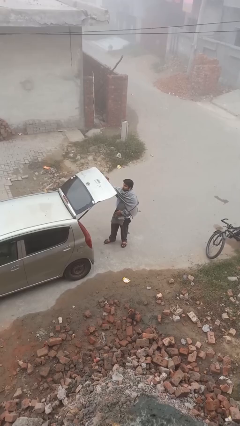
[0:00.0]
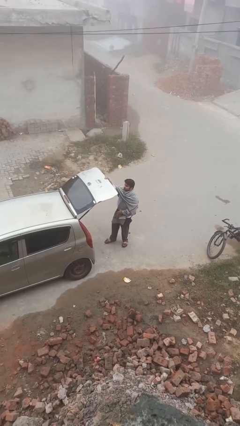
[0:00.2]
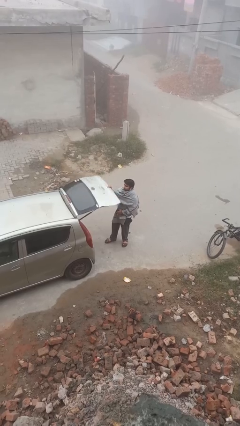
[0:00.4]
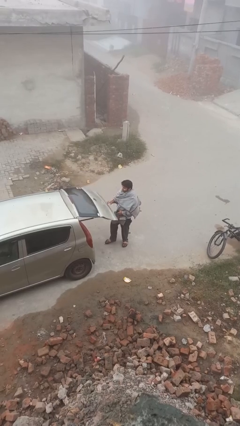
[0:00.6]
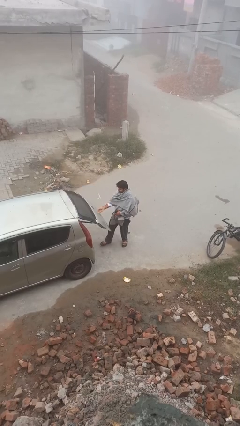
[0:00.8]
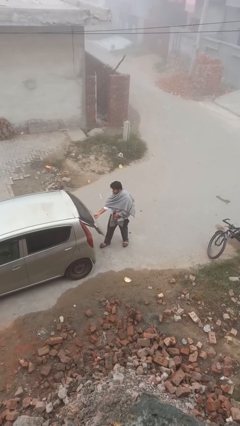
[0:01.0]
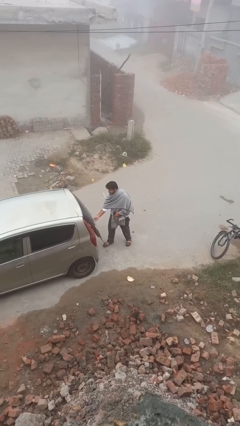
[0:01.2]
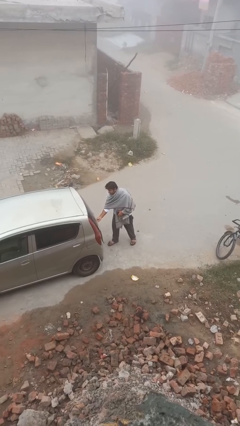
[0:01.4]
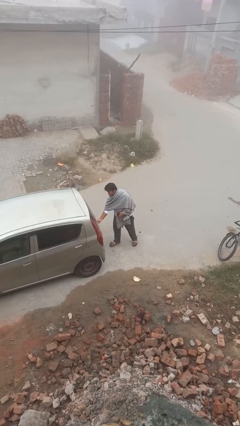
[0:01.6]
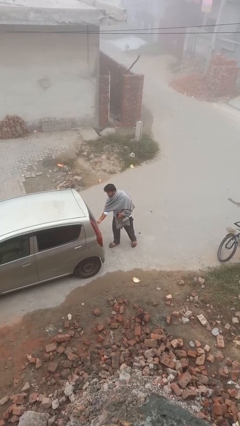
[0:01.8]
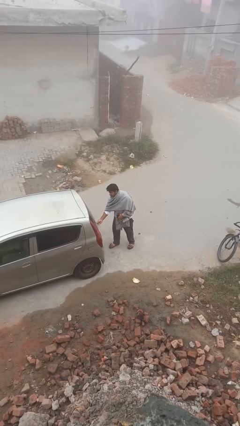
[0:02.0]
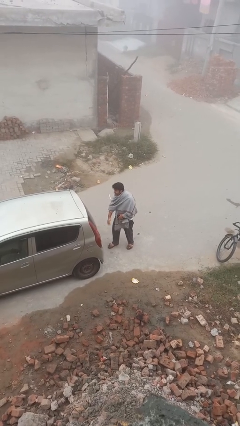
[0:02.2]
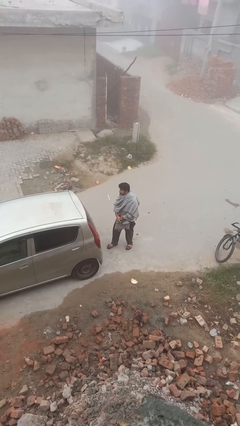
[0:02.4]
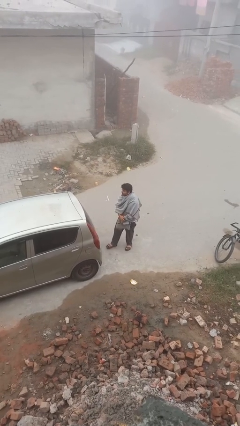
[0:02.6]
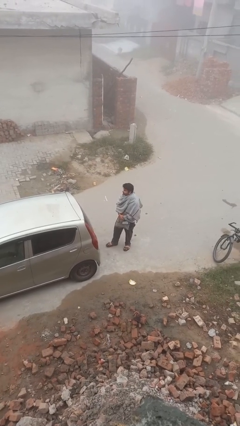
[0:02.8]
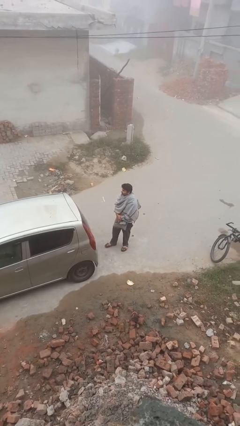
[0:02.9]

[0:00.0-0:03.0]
person closes car trunk

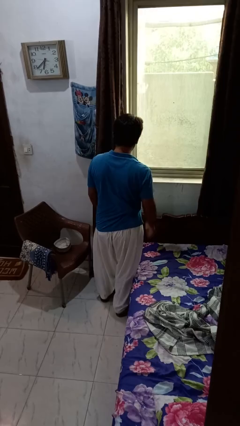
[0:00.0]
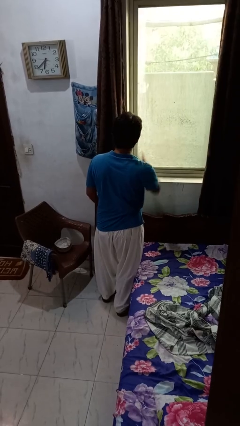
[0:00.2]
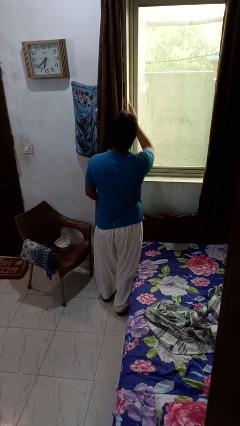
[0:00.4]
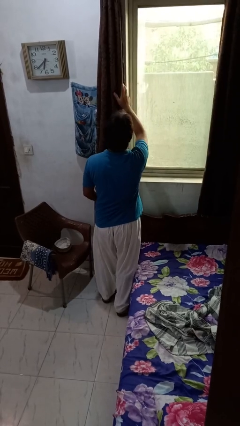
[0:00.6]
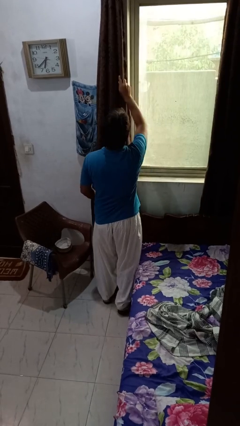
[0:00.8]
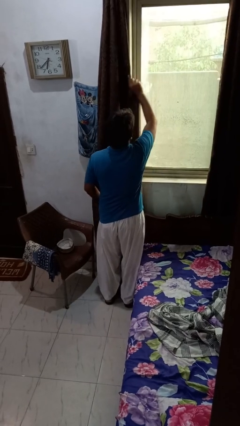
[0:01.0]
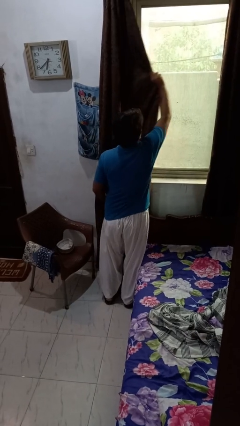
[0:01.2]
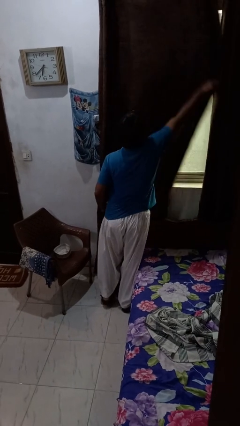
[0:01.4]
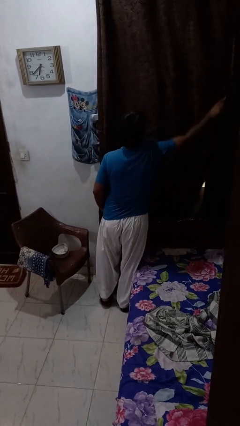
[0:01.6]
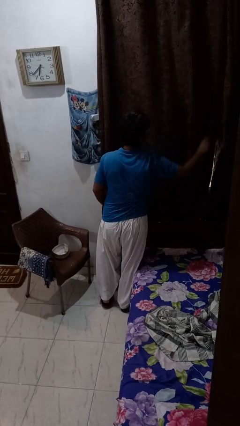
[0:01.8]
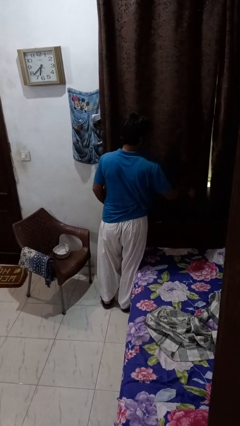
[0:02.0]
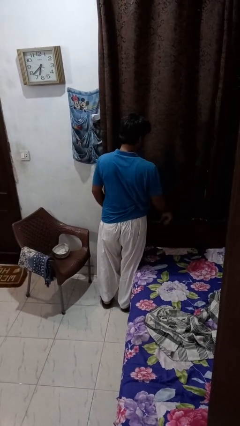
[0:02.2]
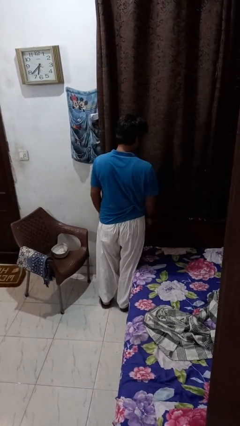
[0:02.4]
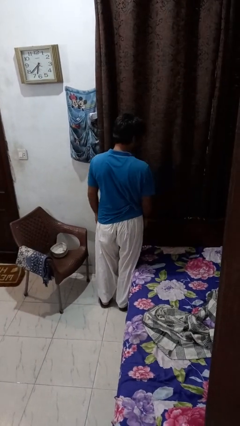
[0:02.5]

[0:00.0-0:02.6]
person closes curtains

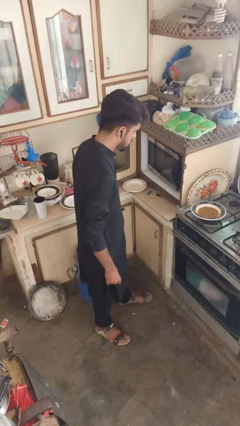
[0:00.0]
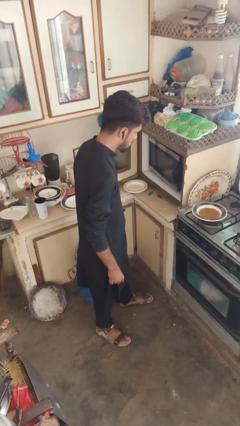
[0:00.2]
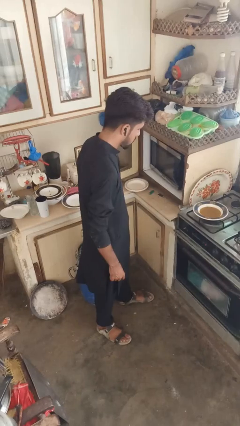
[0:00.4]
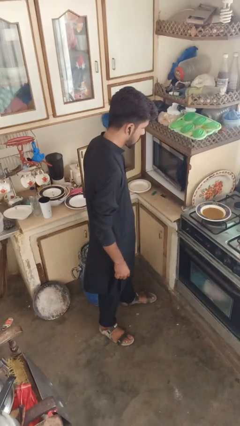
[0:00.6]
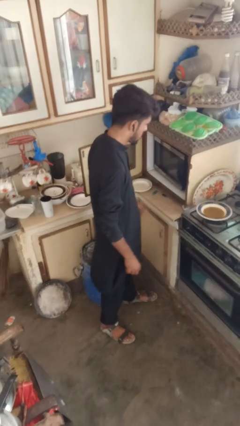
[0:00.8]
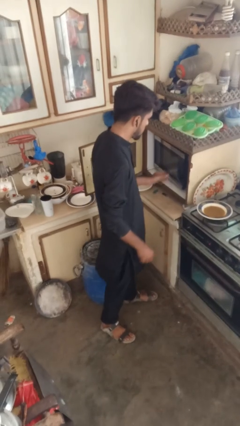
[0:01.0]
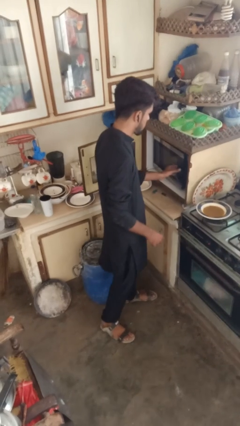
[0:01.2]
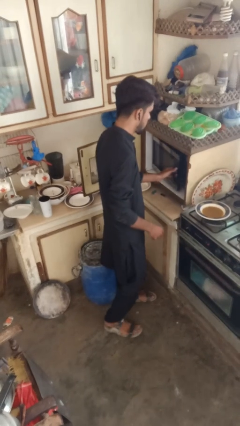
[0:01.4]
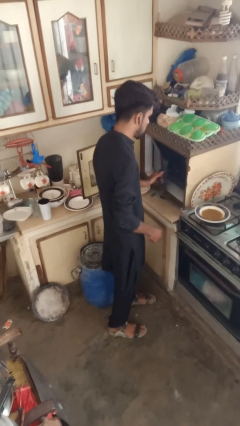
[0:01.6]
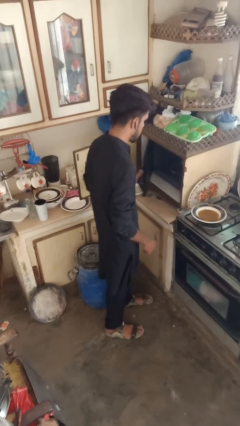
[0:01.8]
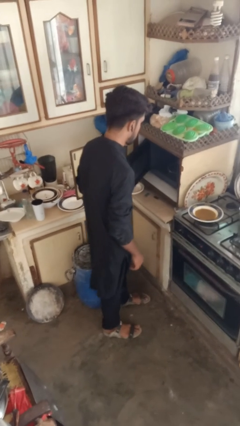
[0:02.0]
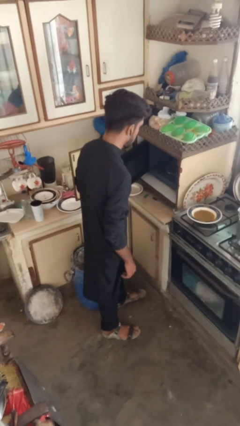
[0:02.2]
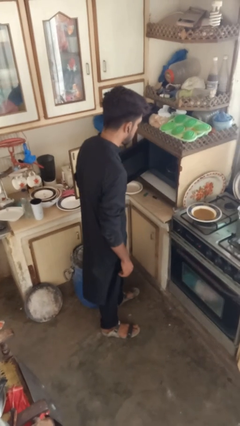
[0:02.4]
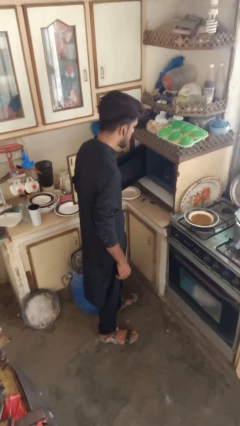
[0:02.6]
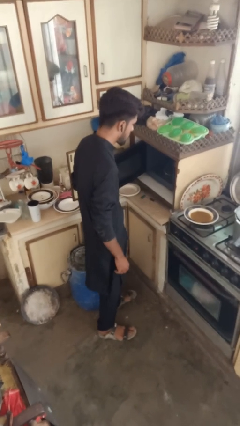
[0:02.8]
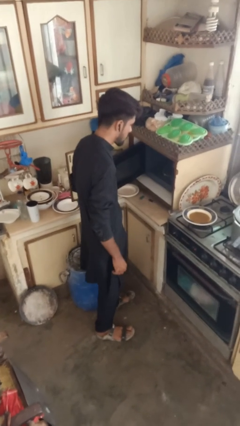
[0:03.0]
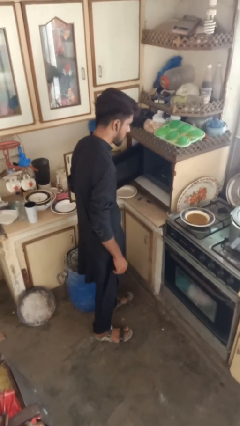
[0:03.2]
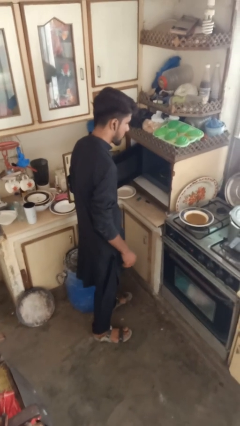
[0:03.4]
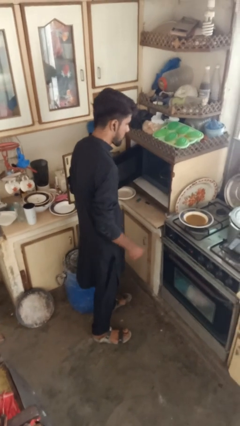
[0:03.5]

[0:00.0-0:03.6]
person opens microwave

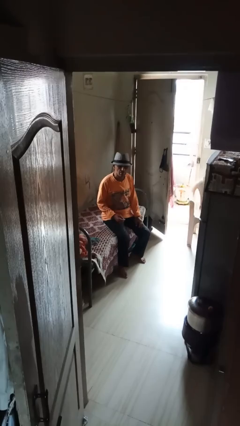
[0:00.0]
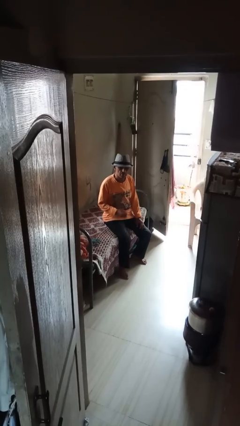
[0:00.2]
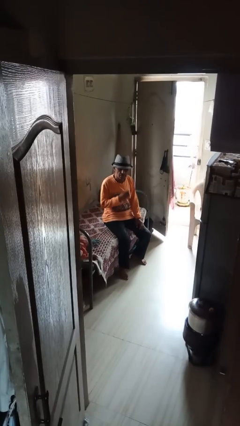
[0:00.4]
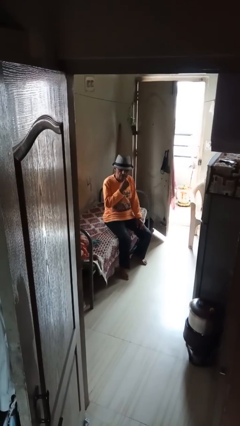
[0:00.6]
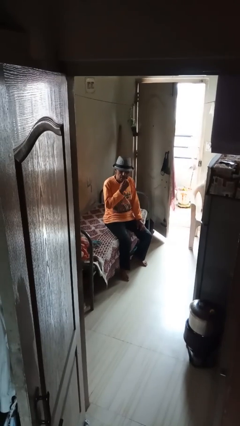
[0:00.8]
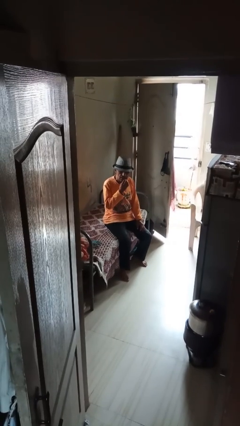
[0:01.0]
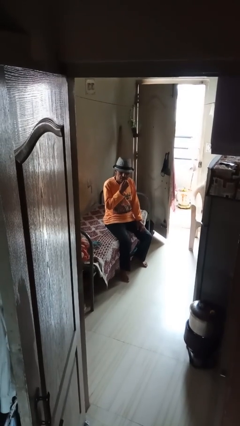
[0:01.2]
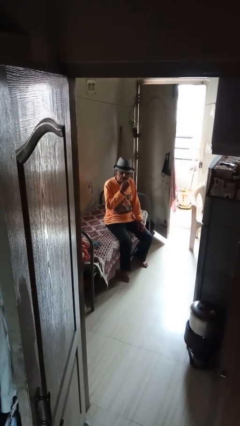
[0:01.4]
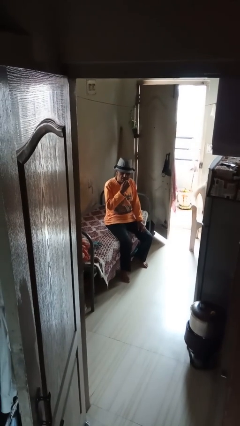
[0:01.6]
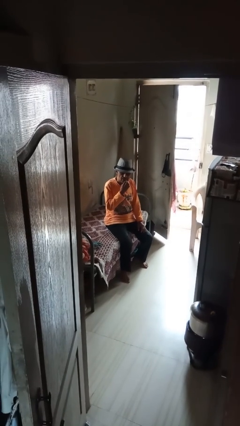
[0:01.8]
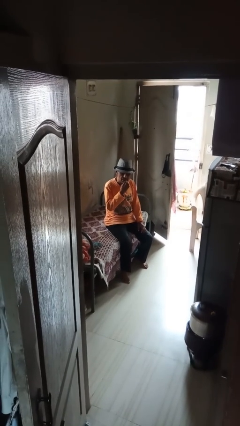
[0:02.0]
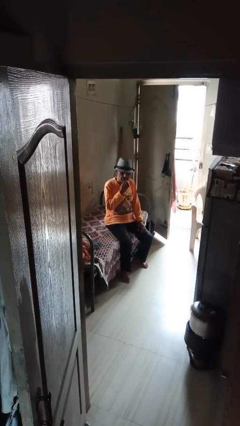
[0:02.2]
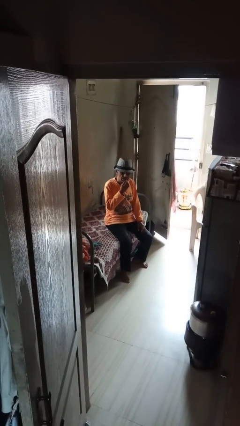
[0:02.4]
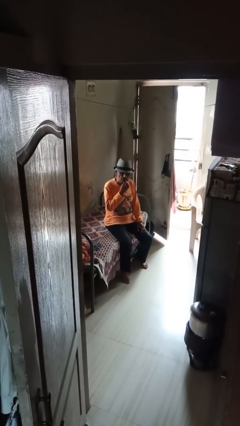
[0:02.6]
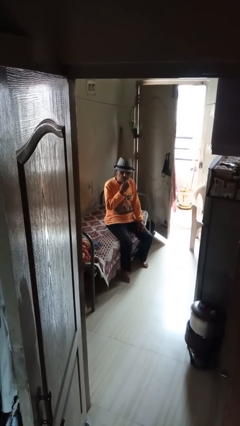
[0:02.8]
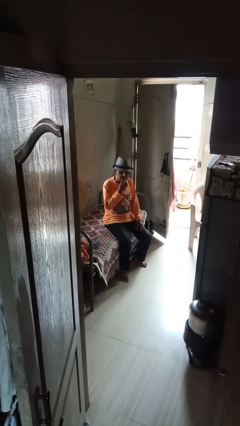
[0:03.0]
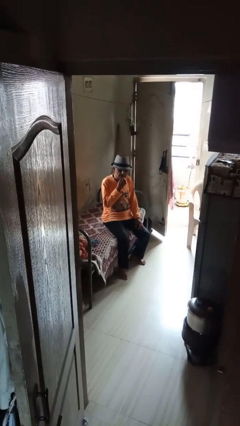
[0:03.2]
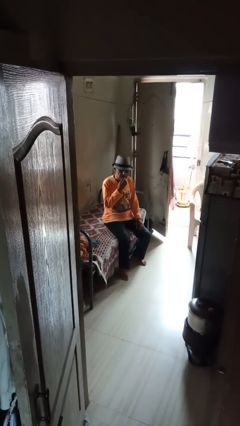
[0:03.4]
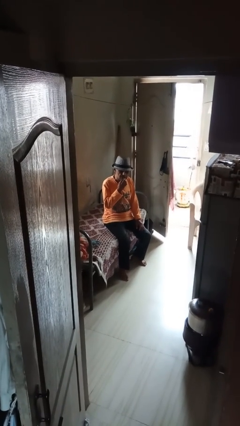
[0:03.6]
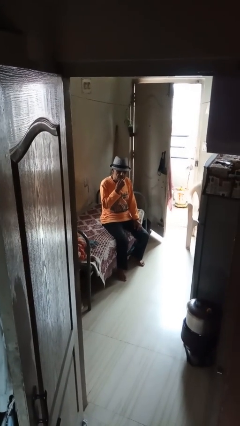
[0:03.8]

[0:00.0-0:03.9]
person flosses

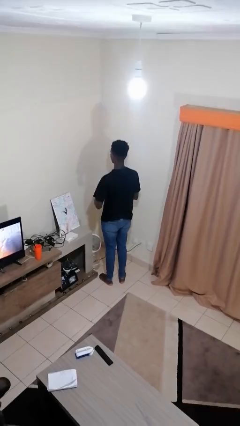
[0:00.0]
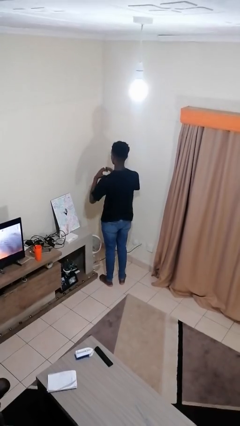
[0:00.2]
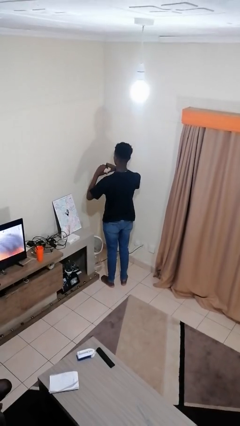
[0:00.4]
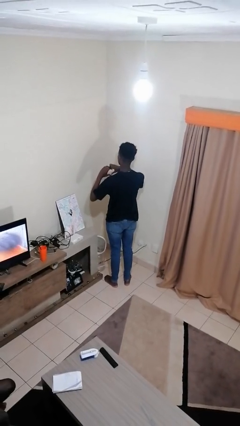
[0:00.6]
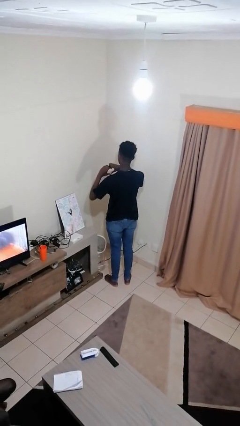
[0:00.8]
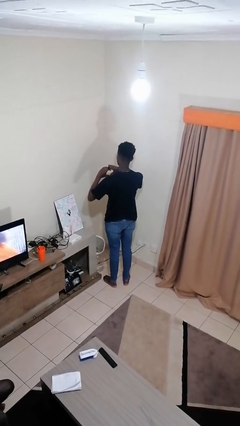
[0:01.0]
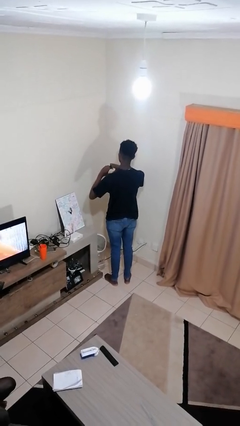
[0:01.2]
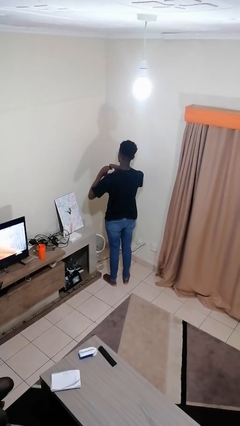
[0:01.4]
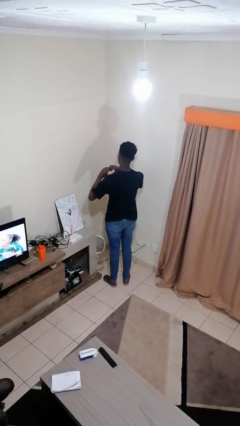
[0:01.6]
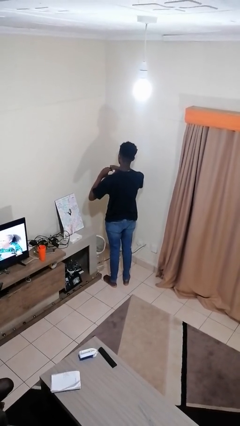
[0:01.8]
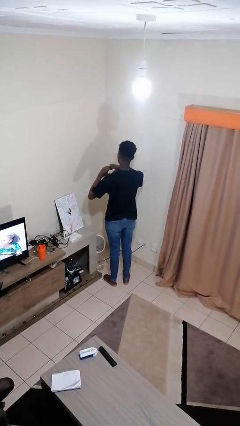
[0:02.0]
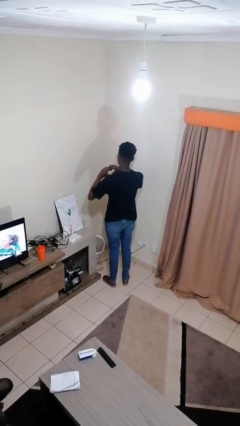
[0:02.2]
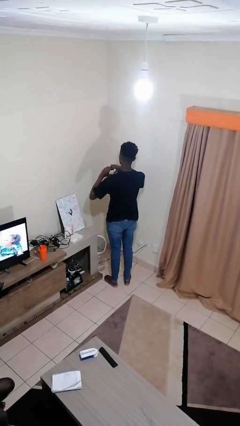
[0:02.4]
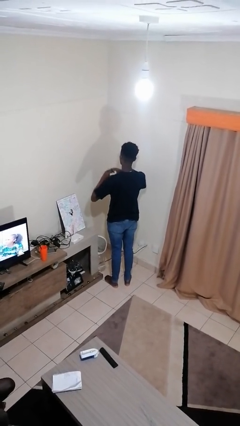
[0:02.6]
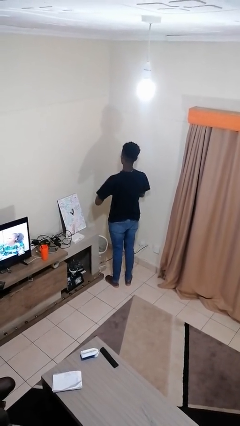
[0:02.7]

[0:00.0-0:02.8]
person gestures heart

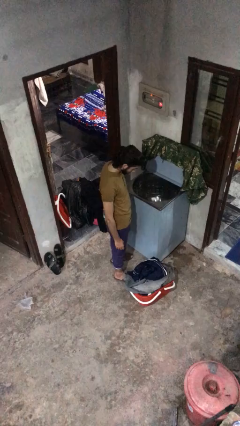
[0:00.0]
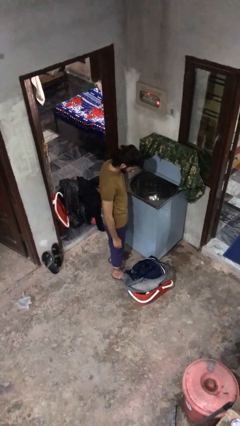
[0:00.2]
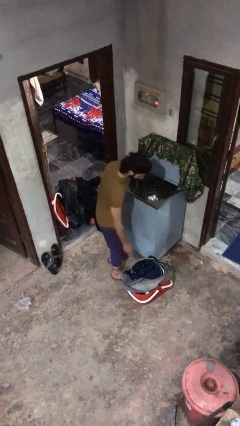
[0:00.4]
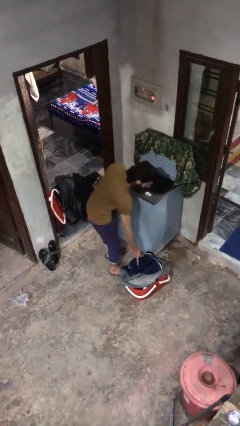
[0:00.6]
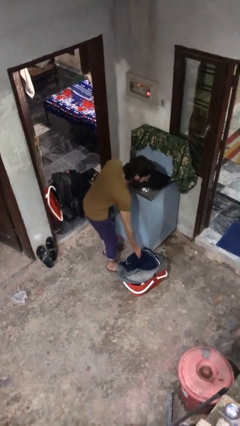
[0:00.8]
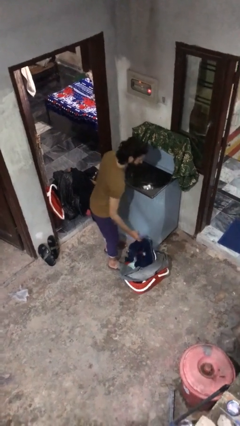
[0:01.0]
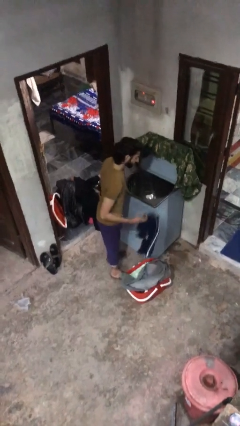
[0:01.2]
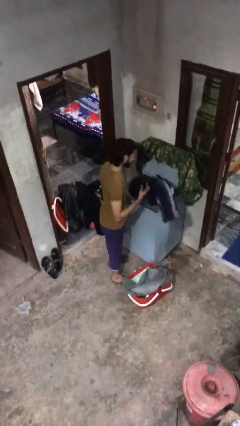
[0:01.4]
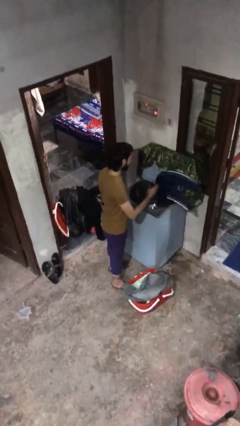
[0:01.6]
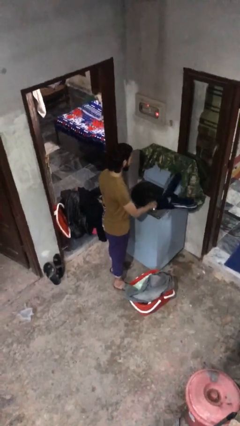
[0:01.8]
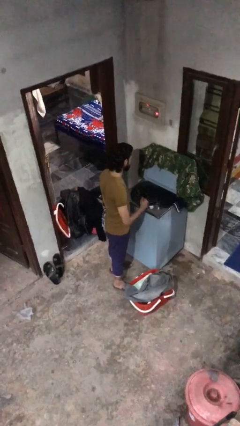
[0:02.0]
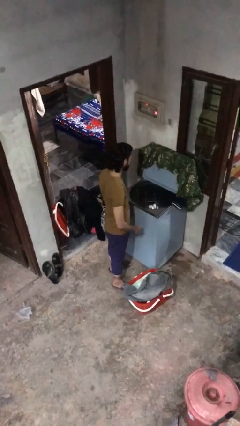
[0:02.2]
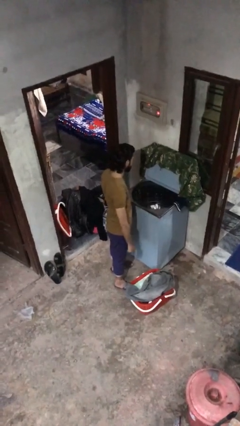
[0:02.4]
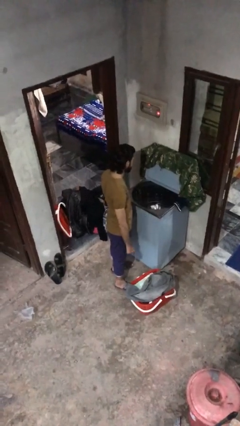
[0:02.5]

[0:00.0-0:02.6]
person loads clotheswasher
